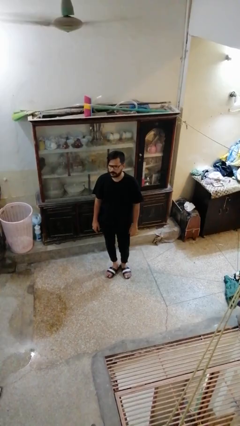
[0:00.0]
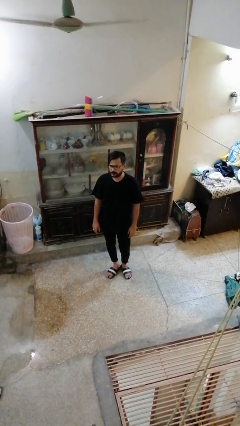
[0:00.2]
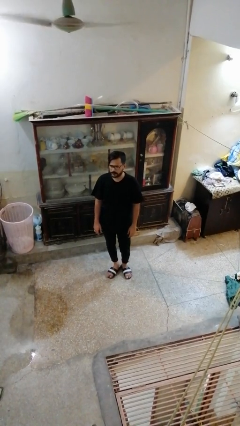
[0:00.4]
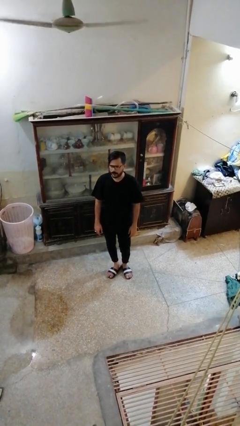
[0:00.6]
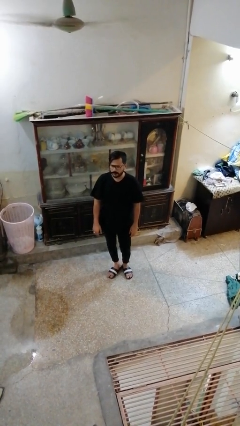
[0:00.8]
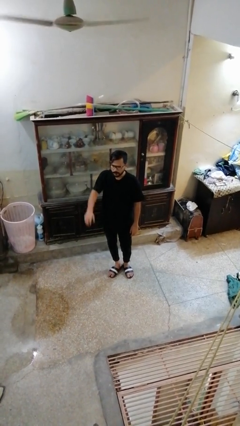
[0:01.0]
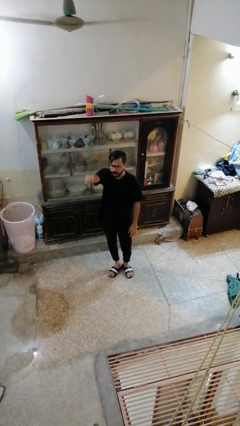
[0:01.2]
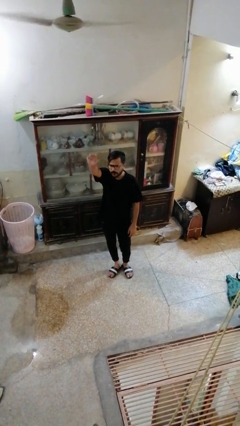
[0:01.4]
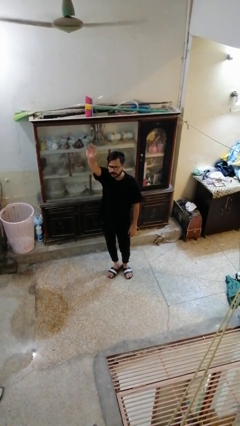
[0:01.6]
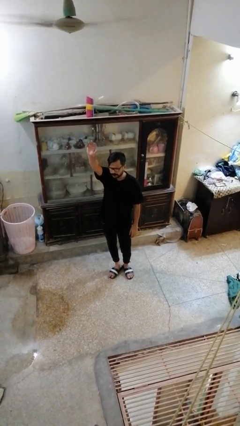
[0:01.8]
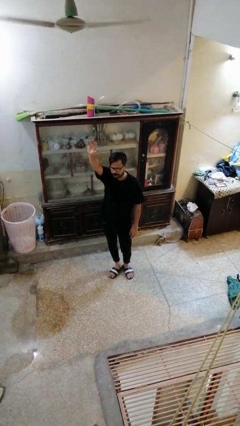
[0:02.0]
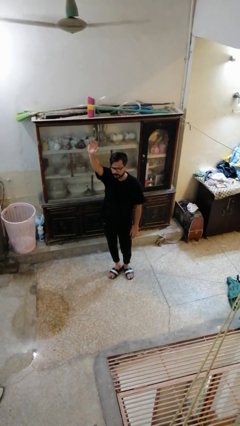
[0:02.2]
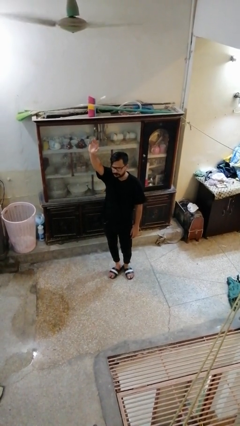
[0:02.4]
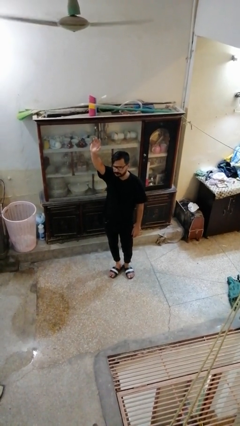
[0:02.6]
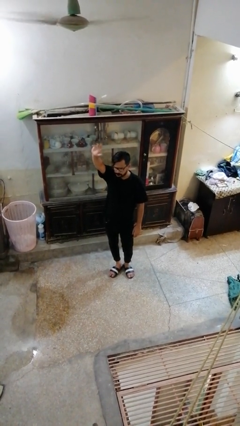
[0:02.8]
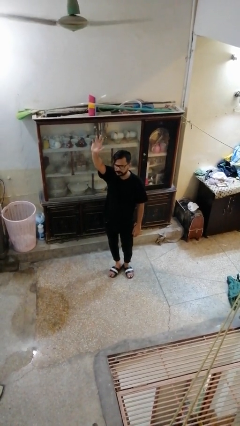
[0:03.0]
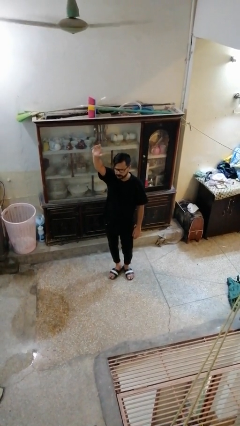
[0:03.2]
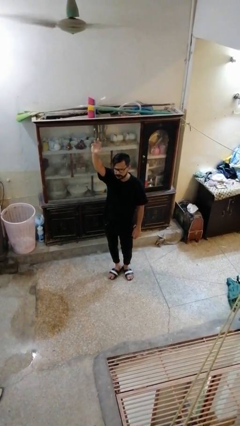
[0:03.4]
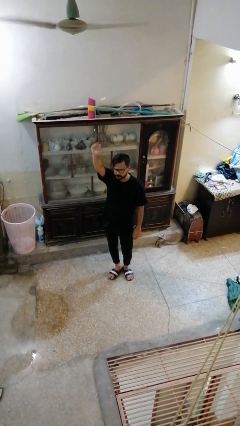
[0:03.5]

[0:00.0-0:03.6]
person gestures raise hand

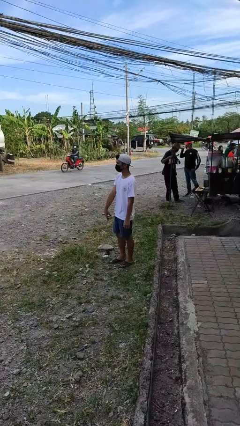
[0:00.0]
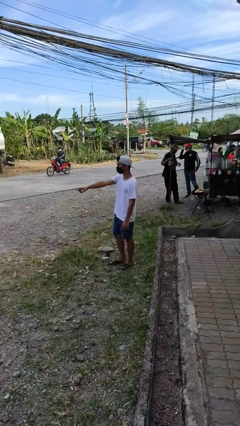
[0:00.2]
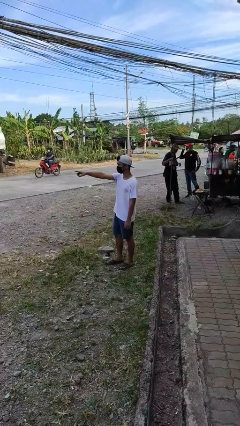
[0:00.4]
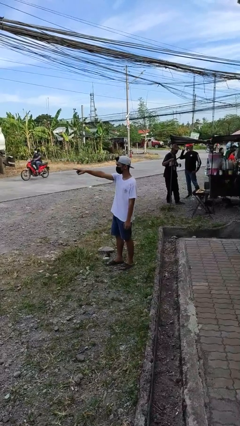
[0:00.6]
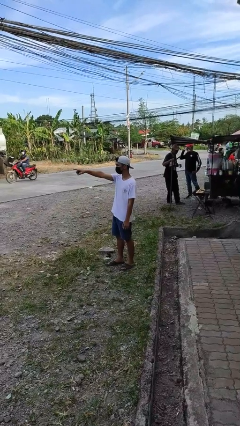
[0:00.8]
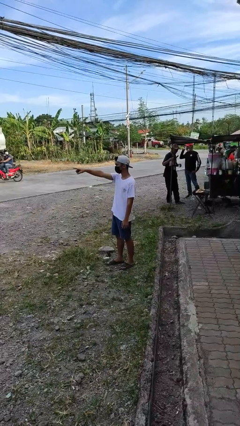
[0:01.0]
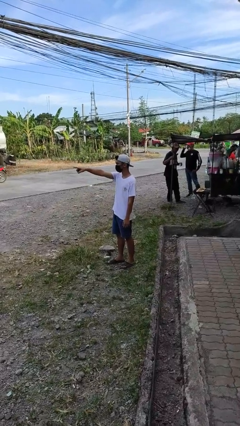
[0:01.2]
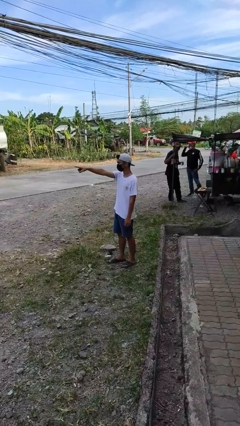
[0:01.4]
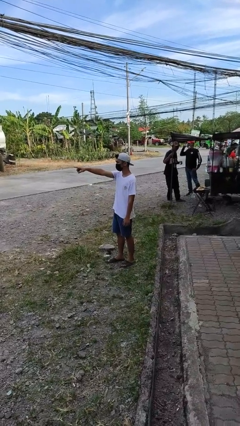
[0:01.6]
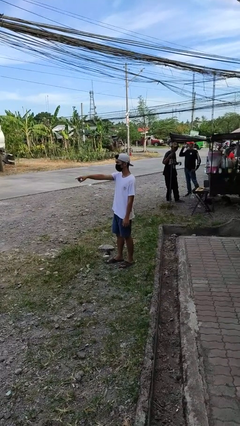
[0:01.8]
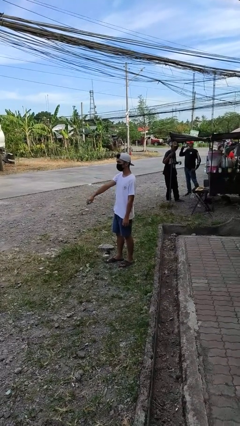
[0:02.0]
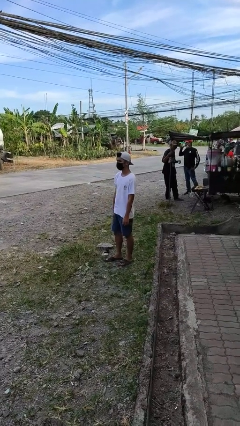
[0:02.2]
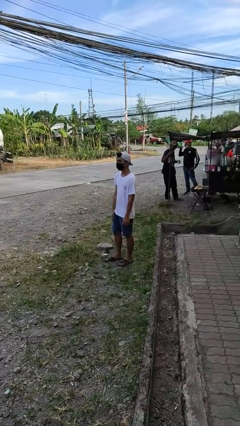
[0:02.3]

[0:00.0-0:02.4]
person points at person

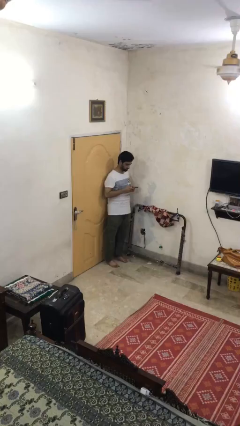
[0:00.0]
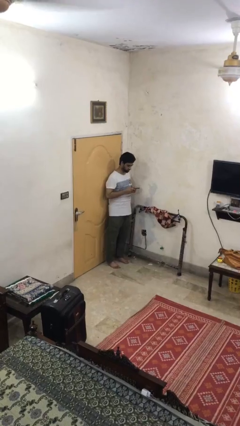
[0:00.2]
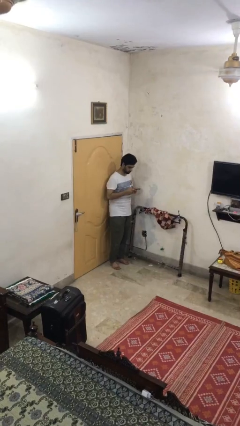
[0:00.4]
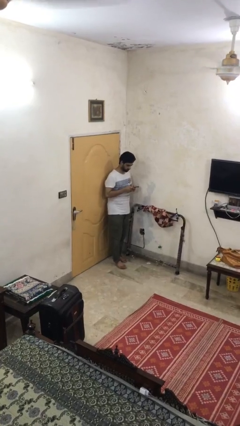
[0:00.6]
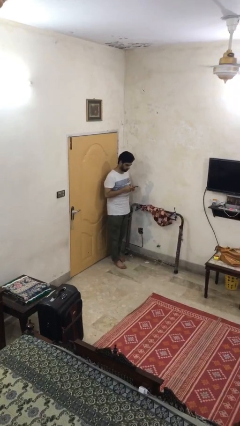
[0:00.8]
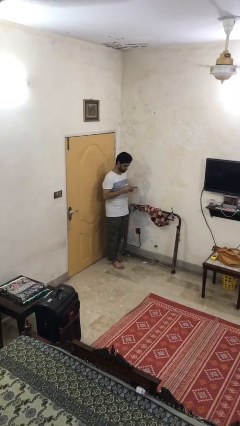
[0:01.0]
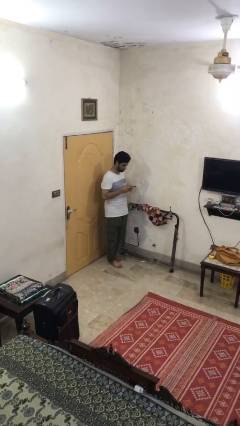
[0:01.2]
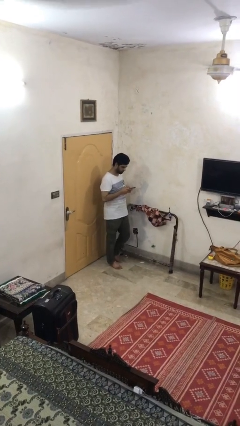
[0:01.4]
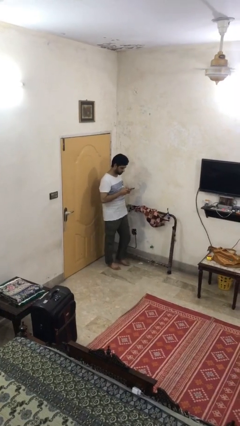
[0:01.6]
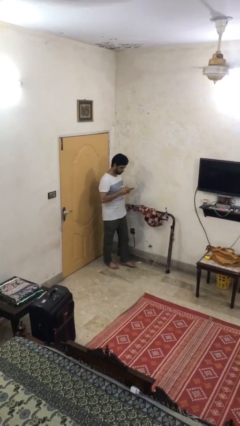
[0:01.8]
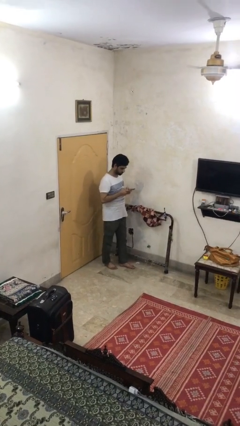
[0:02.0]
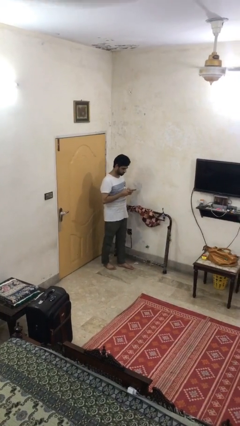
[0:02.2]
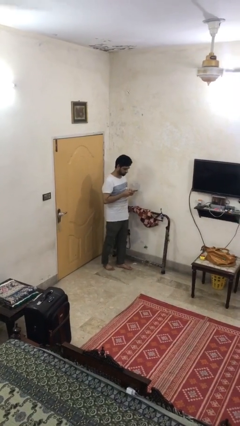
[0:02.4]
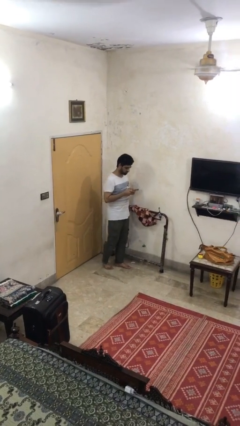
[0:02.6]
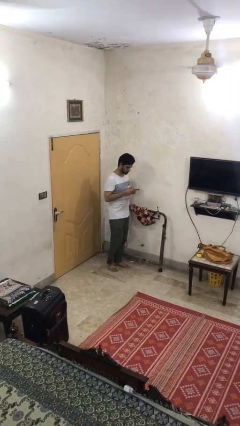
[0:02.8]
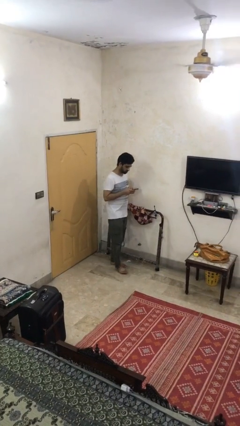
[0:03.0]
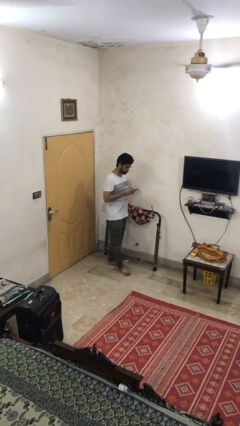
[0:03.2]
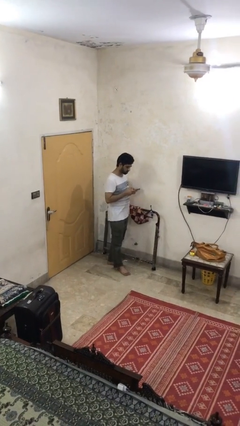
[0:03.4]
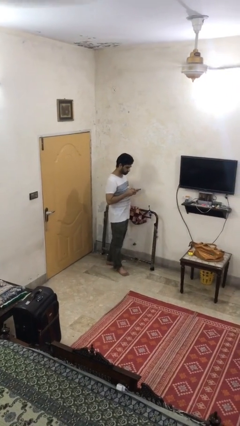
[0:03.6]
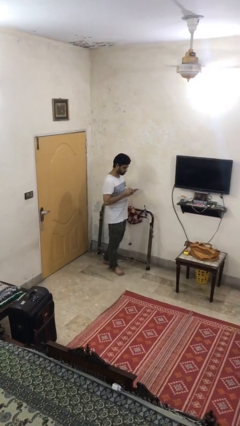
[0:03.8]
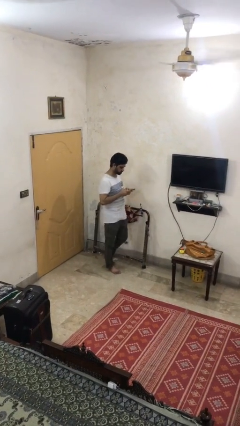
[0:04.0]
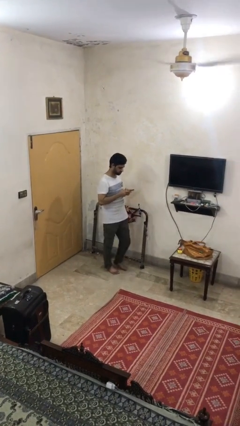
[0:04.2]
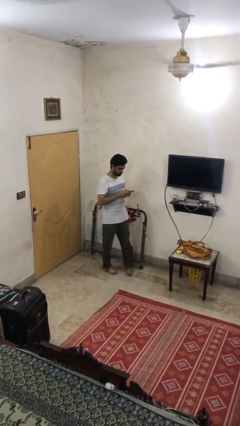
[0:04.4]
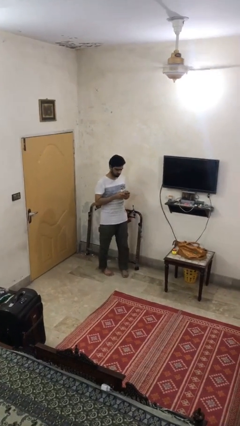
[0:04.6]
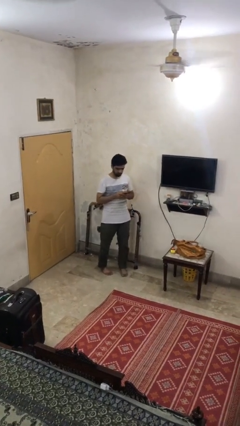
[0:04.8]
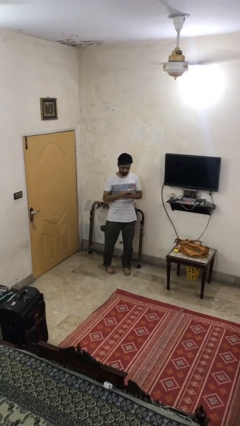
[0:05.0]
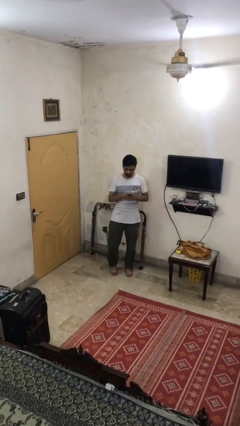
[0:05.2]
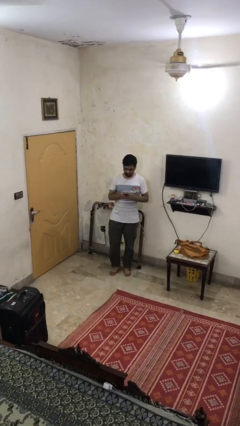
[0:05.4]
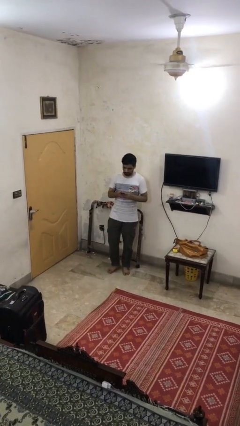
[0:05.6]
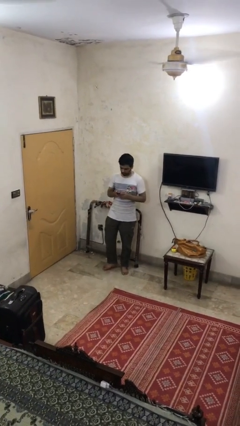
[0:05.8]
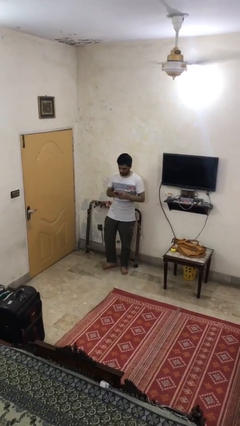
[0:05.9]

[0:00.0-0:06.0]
person texts on phone

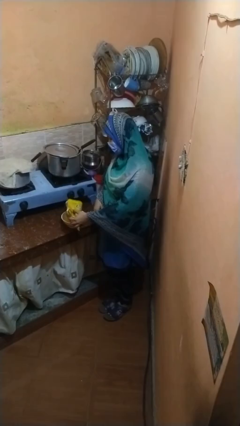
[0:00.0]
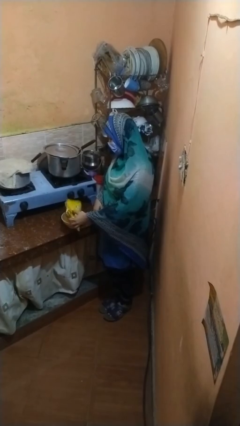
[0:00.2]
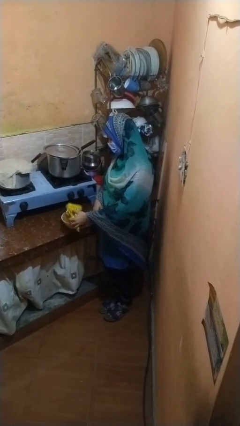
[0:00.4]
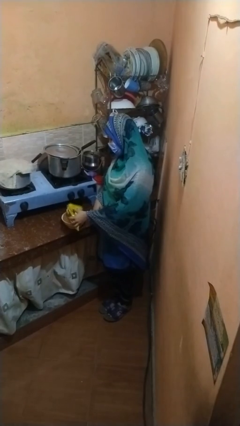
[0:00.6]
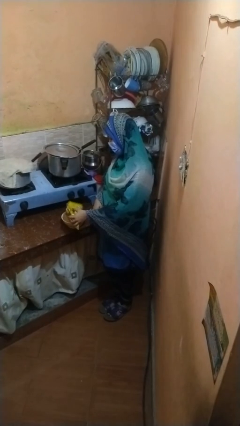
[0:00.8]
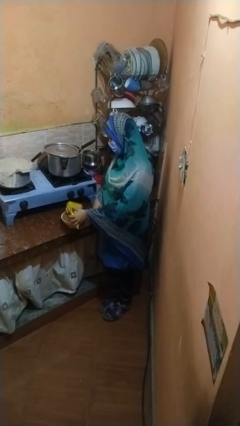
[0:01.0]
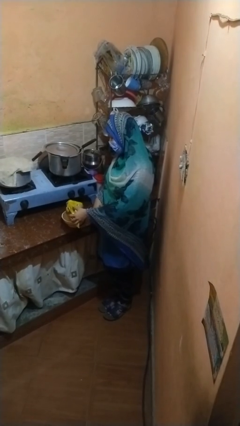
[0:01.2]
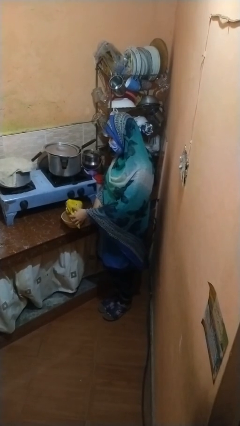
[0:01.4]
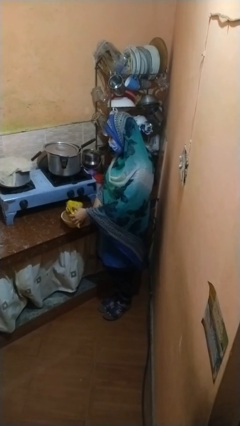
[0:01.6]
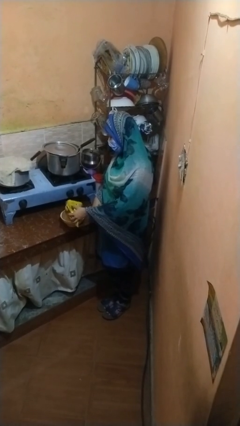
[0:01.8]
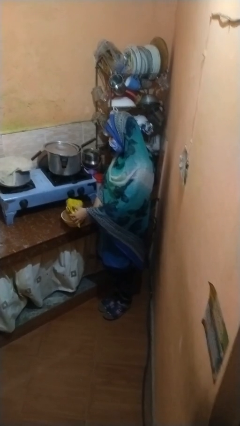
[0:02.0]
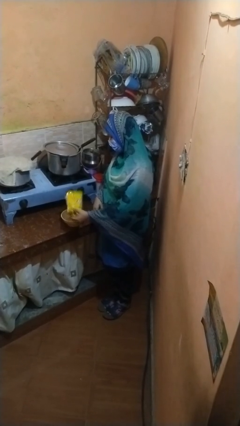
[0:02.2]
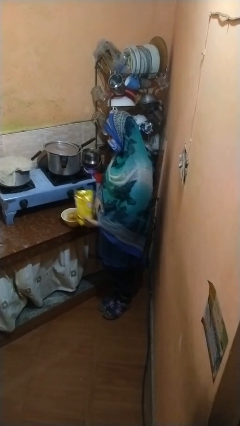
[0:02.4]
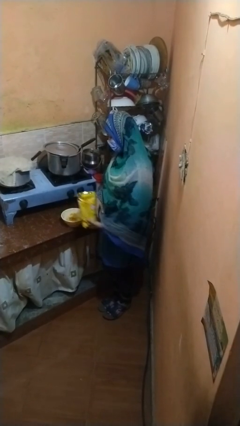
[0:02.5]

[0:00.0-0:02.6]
person pours into bowl

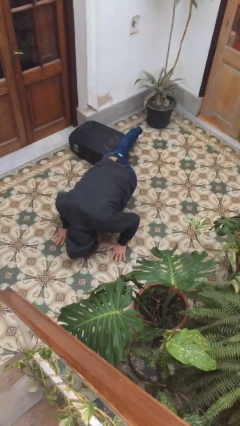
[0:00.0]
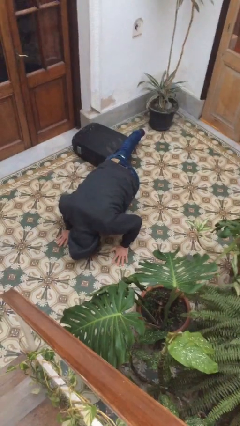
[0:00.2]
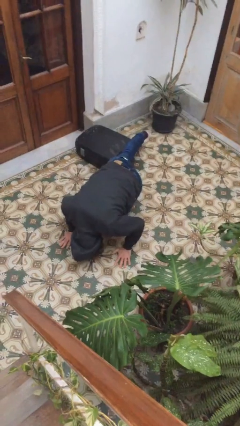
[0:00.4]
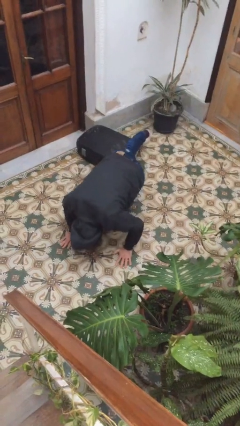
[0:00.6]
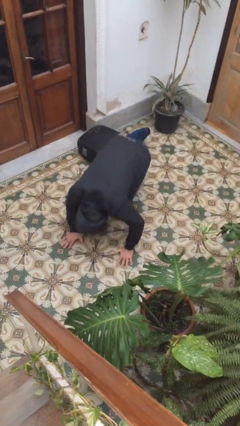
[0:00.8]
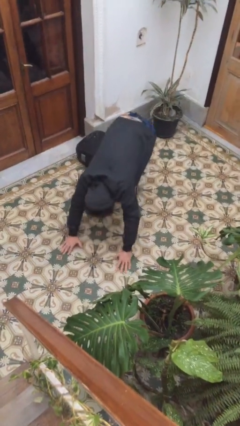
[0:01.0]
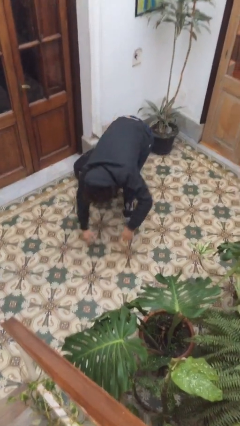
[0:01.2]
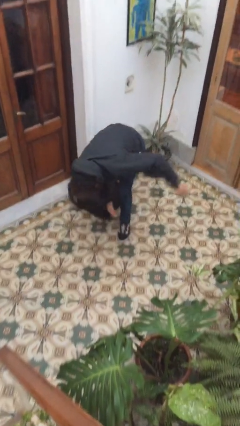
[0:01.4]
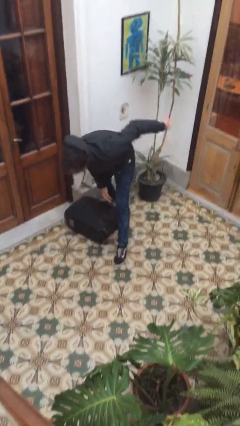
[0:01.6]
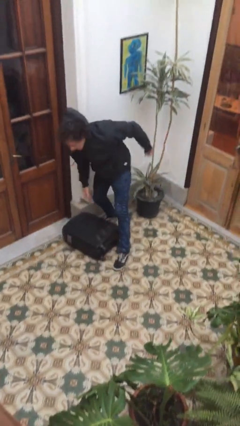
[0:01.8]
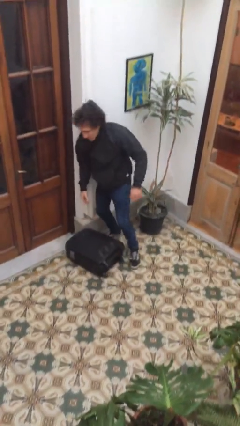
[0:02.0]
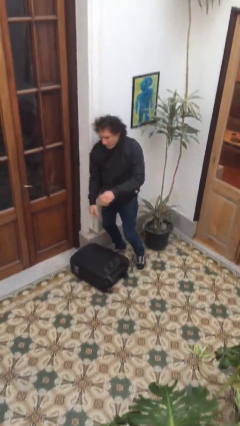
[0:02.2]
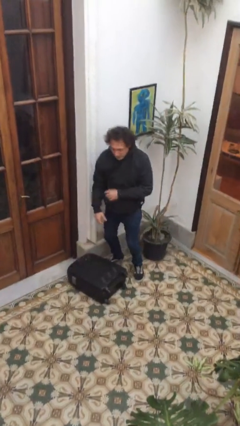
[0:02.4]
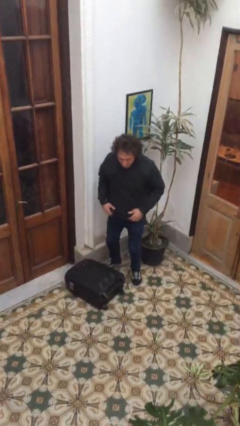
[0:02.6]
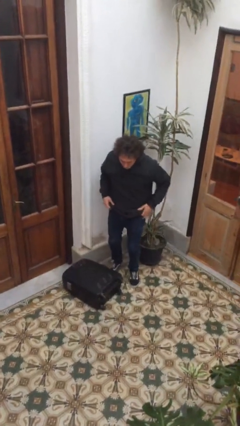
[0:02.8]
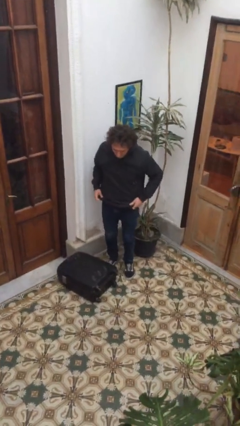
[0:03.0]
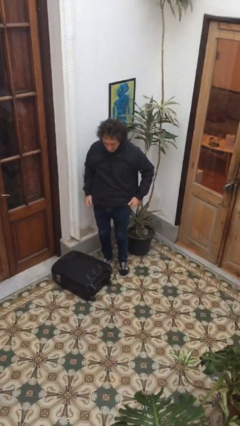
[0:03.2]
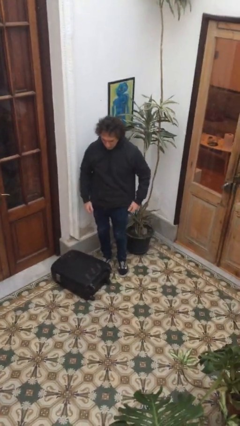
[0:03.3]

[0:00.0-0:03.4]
person stands up from floor
